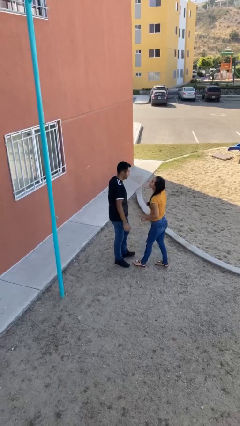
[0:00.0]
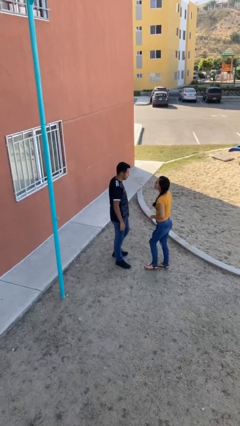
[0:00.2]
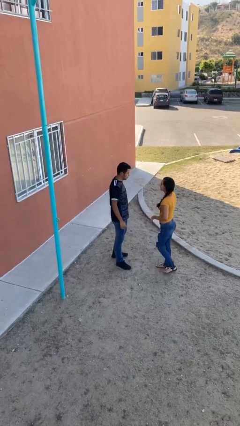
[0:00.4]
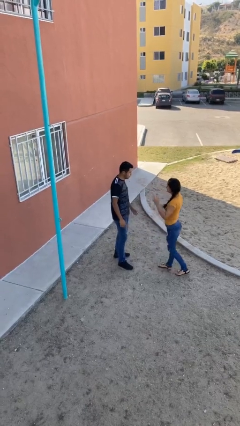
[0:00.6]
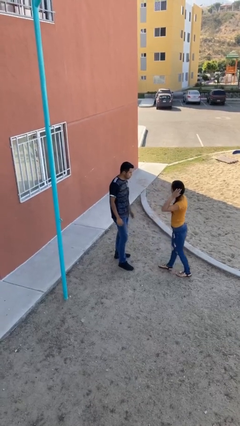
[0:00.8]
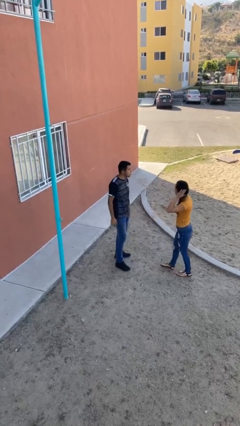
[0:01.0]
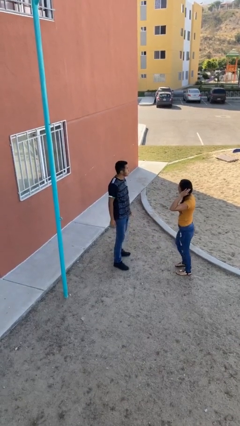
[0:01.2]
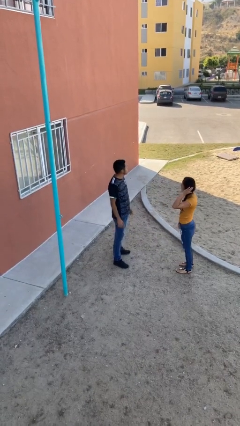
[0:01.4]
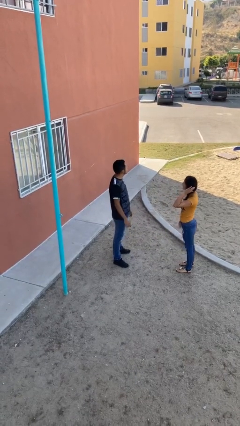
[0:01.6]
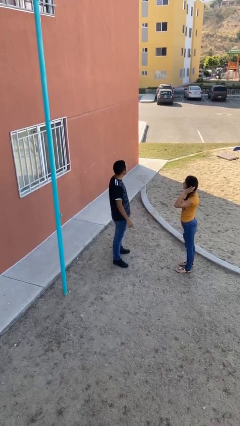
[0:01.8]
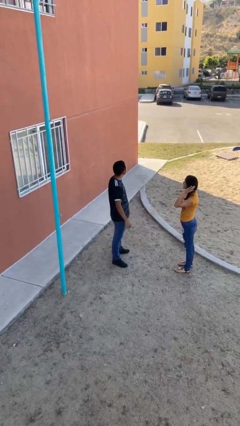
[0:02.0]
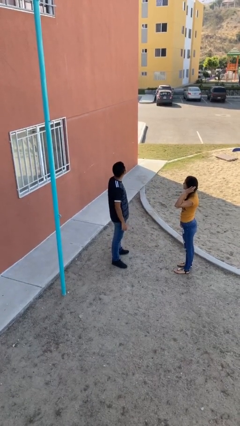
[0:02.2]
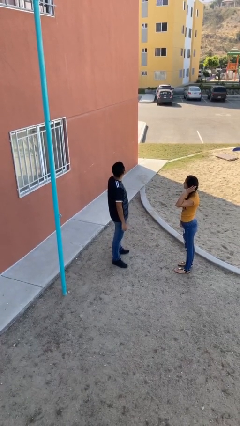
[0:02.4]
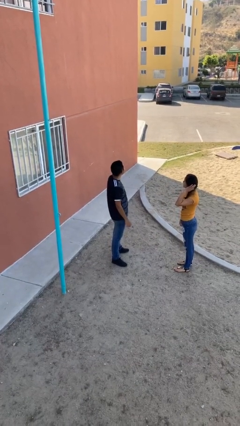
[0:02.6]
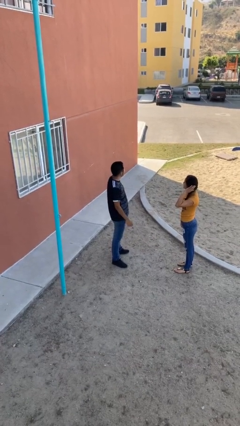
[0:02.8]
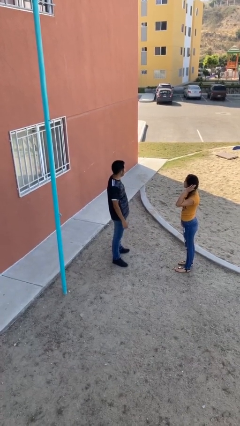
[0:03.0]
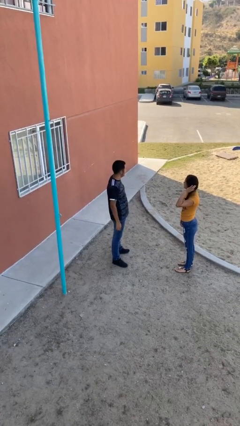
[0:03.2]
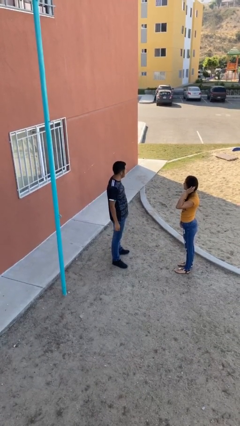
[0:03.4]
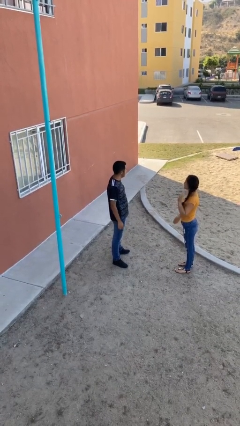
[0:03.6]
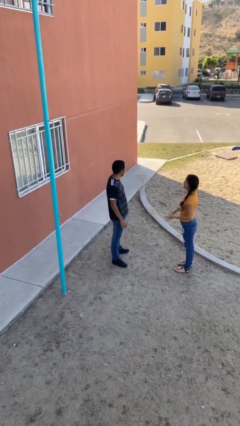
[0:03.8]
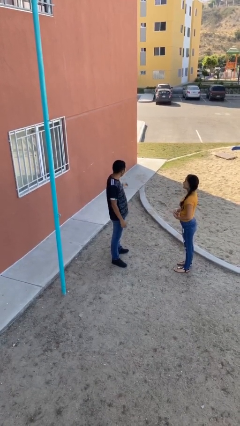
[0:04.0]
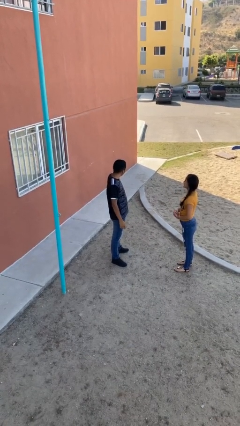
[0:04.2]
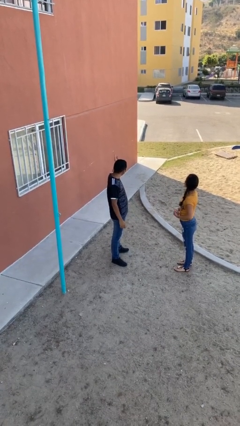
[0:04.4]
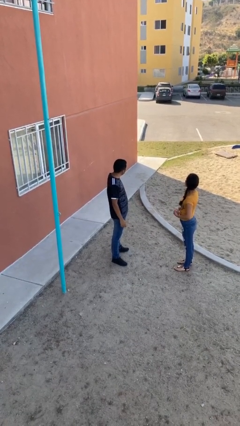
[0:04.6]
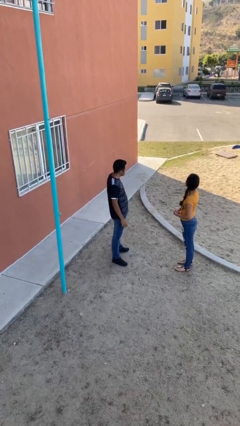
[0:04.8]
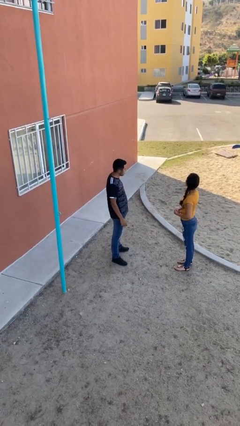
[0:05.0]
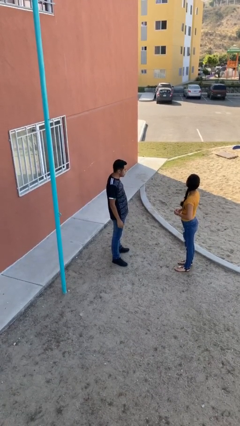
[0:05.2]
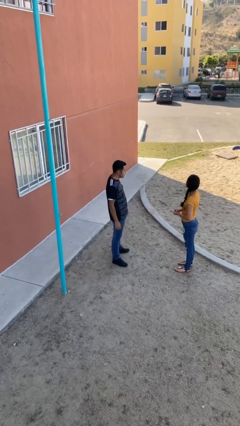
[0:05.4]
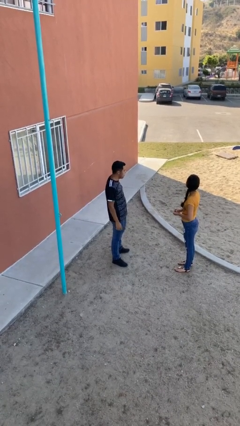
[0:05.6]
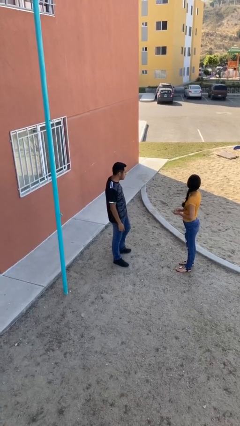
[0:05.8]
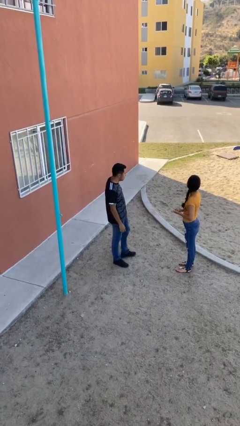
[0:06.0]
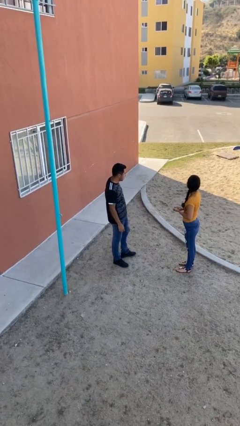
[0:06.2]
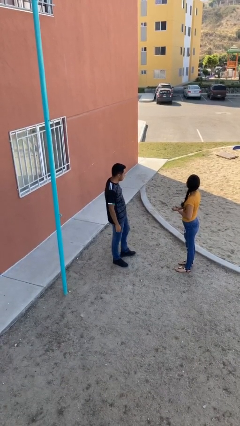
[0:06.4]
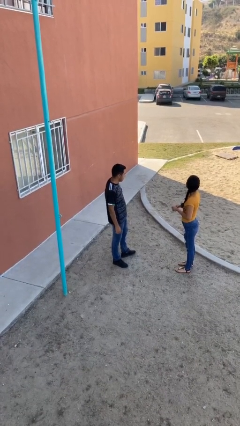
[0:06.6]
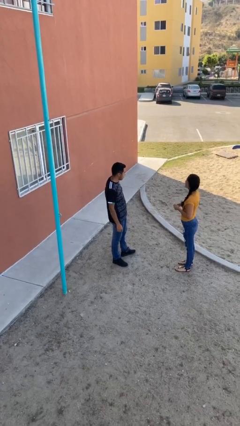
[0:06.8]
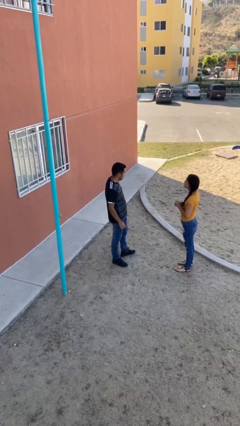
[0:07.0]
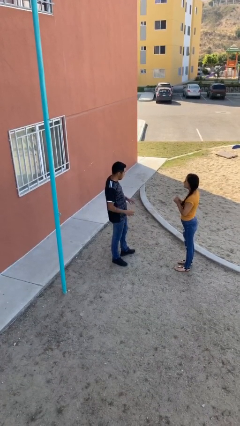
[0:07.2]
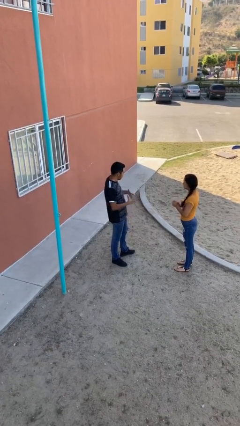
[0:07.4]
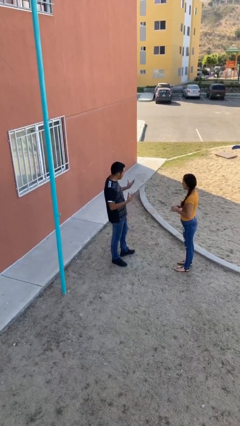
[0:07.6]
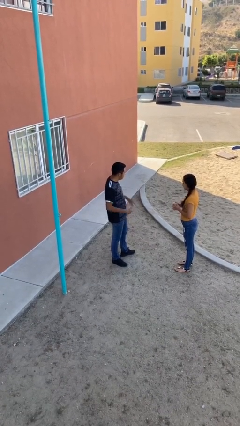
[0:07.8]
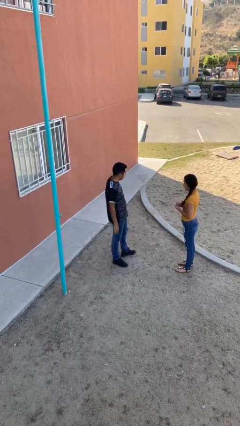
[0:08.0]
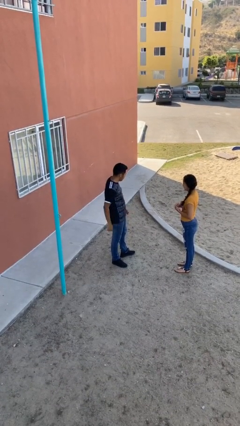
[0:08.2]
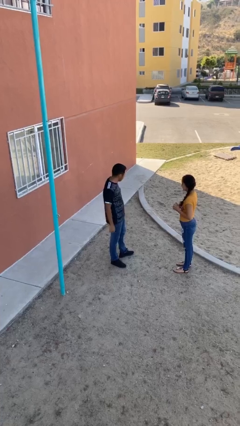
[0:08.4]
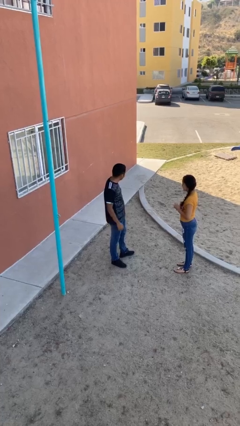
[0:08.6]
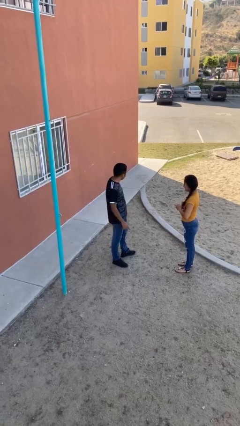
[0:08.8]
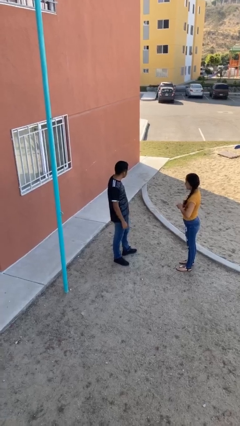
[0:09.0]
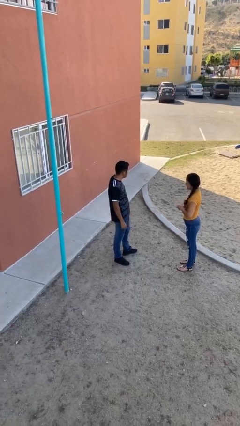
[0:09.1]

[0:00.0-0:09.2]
person talks to person

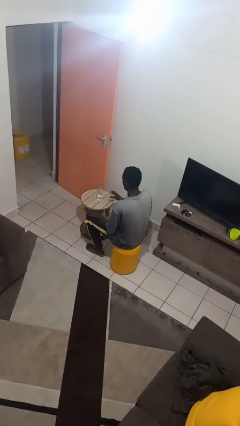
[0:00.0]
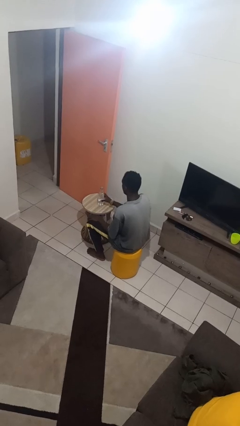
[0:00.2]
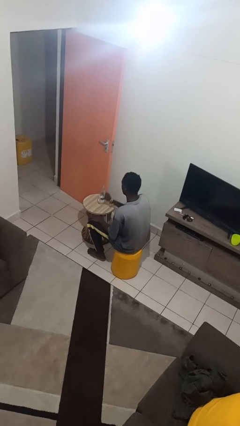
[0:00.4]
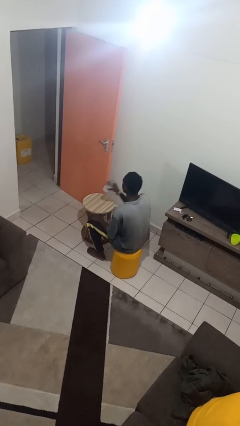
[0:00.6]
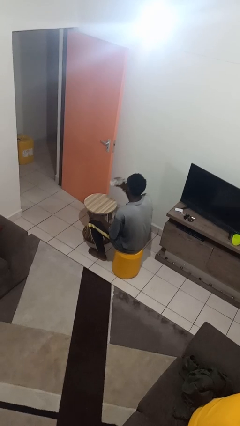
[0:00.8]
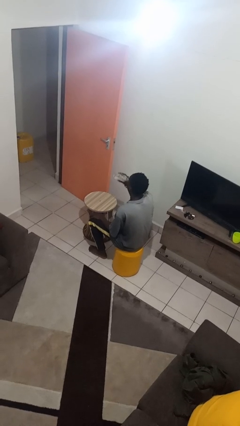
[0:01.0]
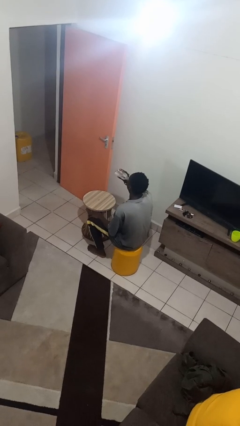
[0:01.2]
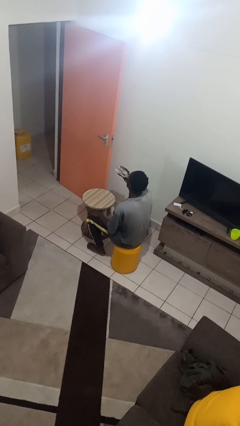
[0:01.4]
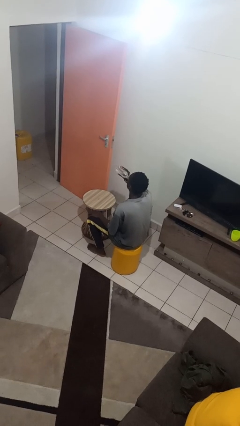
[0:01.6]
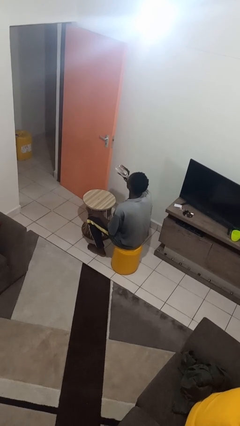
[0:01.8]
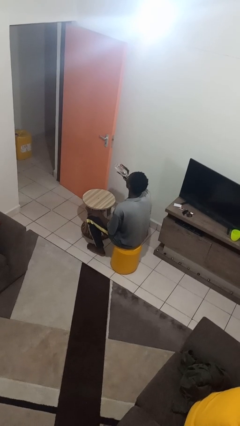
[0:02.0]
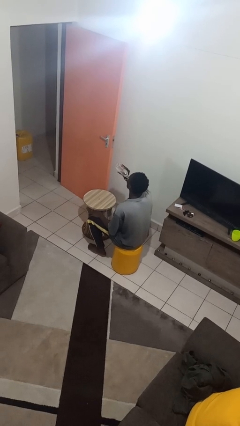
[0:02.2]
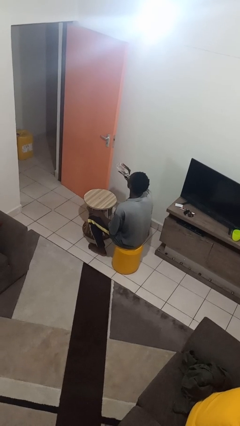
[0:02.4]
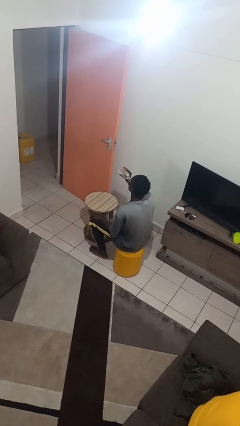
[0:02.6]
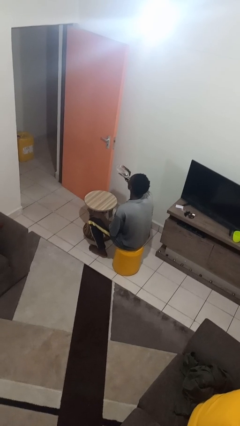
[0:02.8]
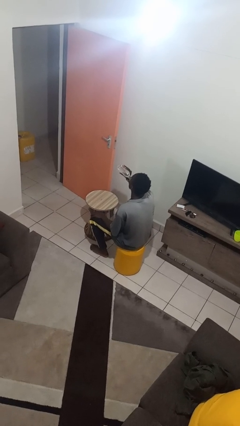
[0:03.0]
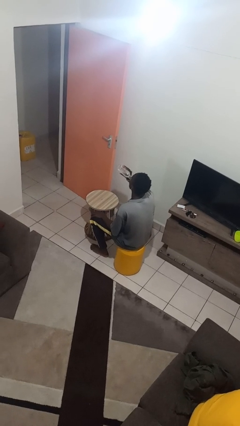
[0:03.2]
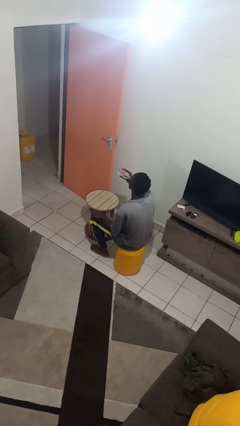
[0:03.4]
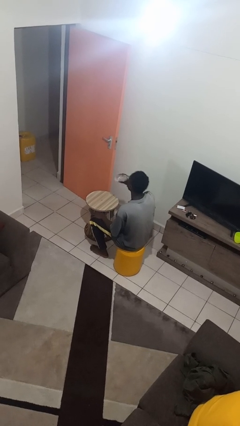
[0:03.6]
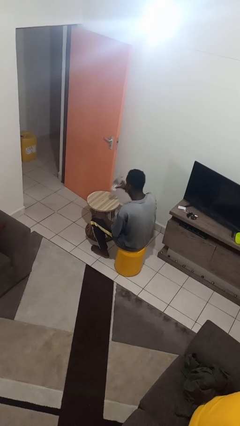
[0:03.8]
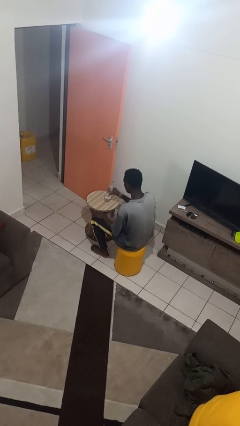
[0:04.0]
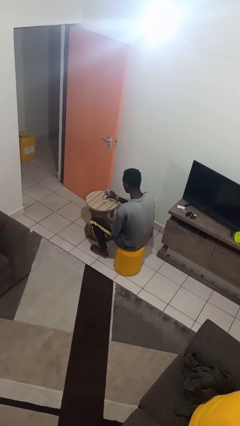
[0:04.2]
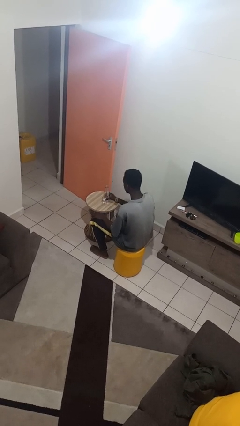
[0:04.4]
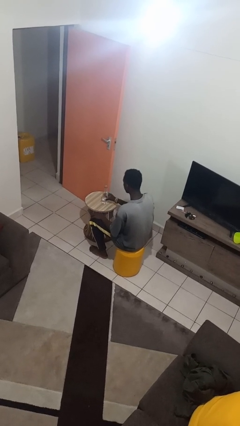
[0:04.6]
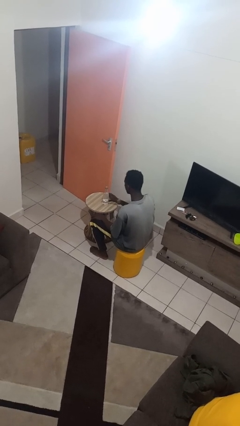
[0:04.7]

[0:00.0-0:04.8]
person drinks from bottle

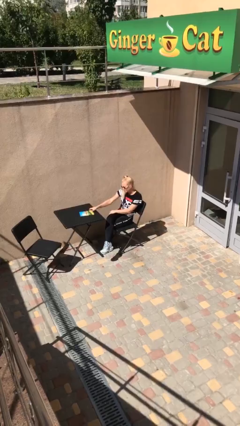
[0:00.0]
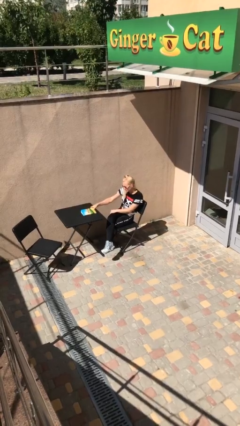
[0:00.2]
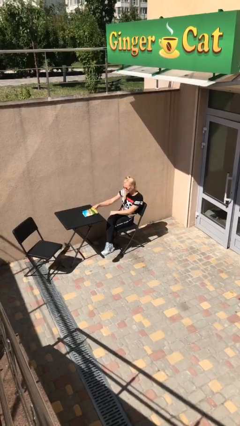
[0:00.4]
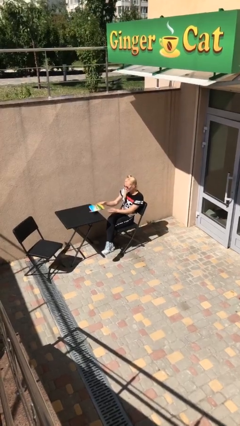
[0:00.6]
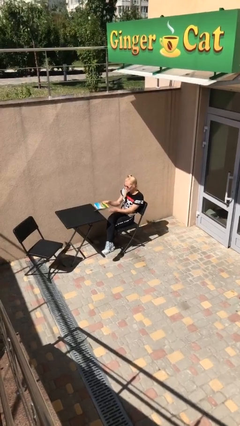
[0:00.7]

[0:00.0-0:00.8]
person picks up object from table

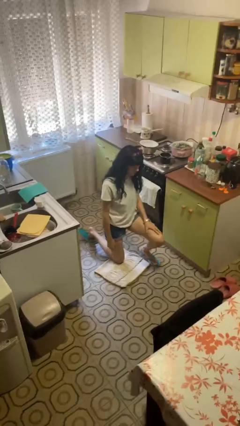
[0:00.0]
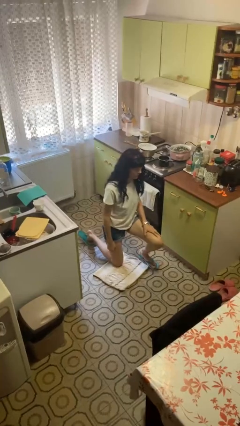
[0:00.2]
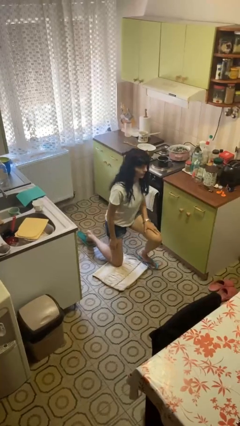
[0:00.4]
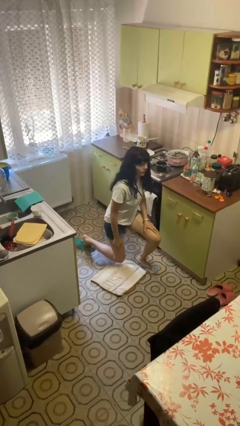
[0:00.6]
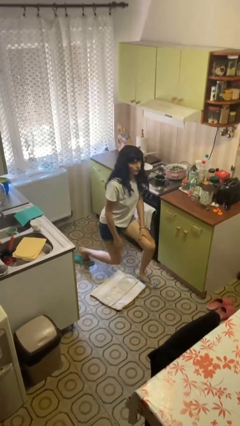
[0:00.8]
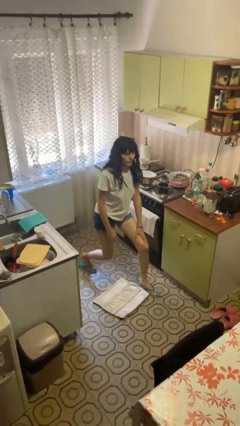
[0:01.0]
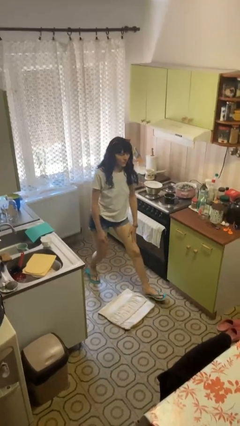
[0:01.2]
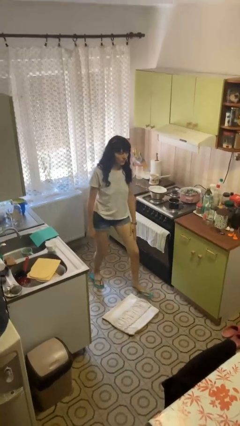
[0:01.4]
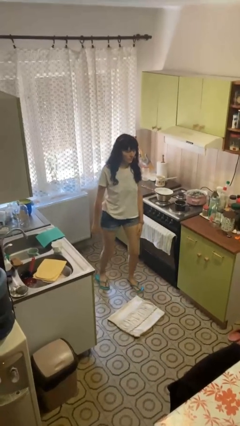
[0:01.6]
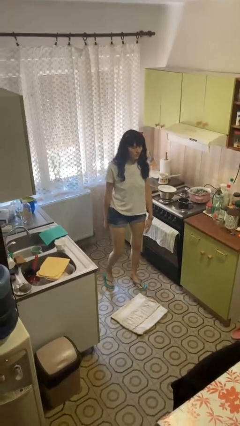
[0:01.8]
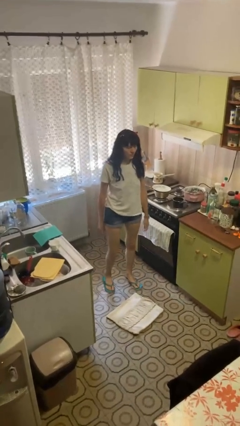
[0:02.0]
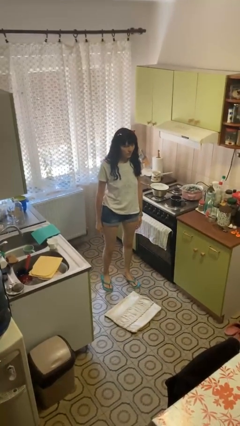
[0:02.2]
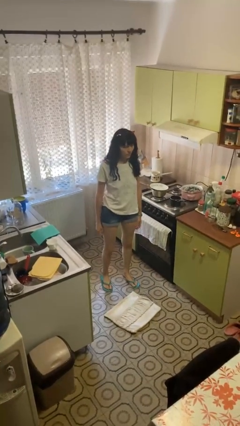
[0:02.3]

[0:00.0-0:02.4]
person stands up from floor

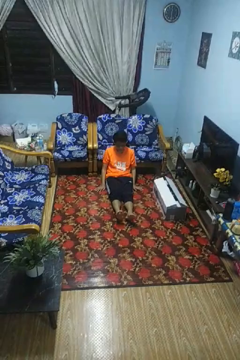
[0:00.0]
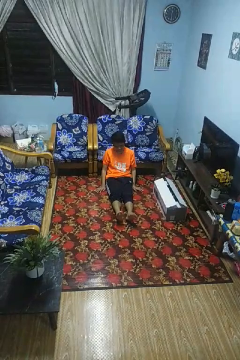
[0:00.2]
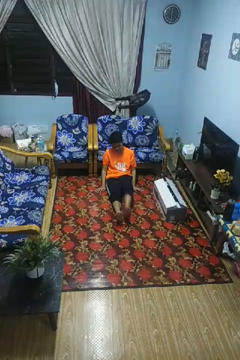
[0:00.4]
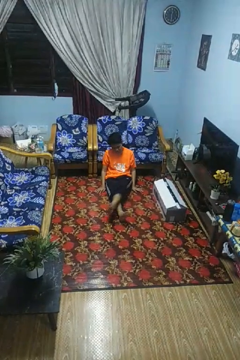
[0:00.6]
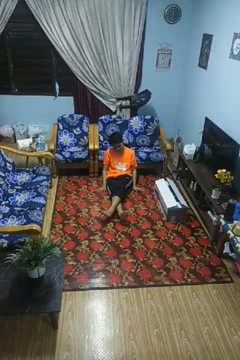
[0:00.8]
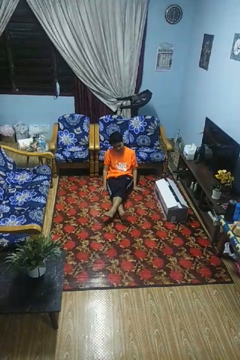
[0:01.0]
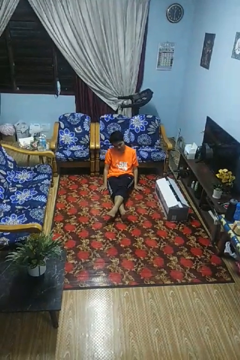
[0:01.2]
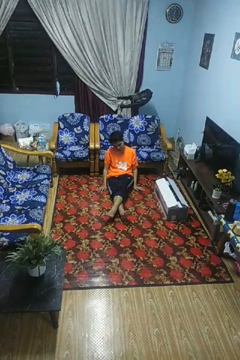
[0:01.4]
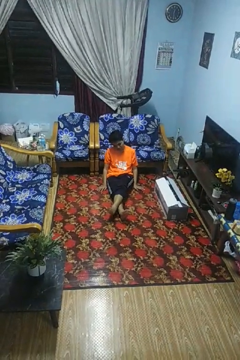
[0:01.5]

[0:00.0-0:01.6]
person crosses legs
